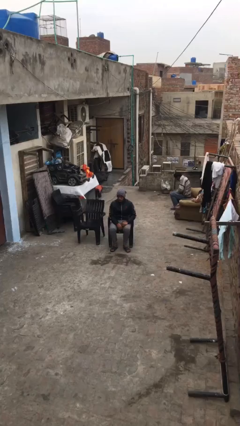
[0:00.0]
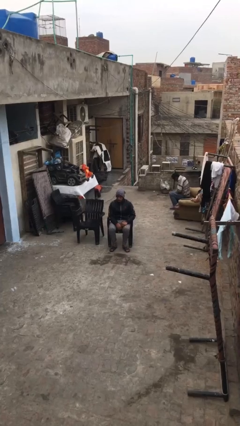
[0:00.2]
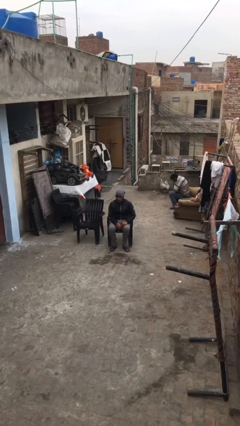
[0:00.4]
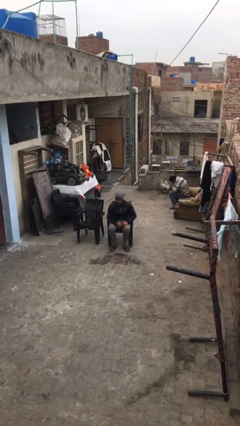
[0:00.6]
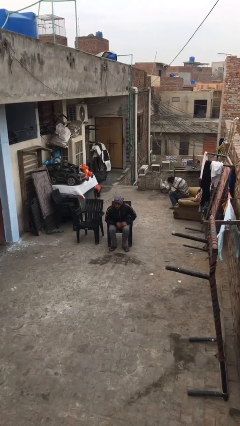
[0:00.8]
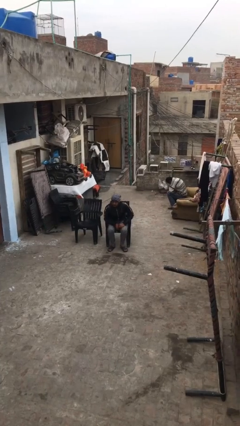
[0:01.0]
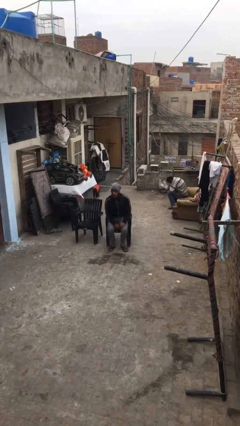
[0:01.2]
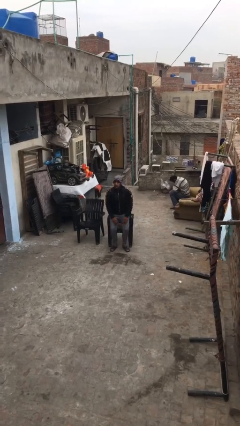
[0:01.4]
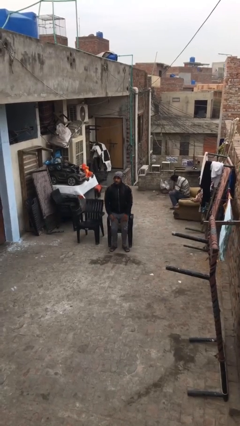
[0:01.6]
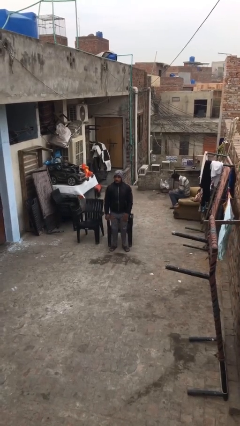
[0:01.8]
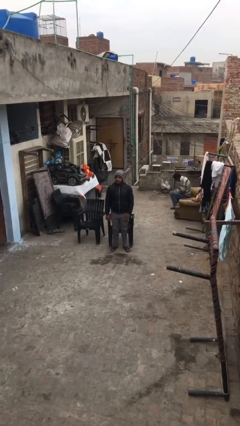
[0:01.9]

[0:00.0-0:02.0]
person stands up

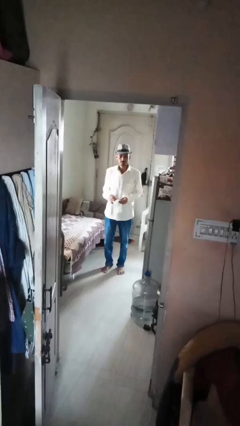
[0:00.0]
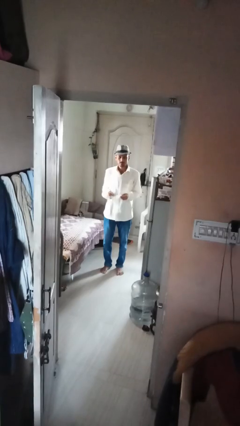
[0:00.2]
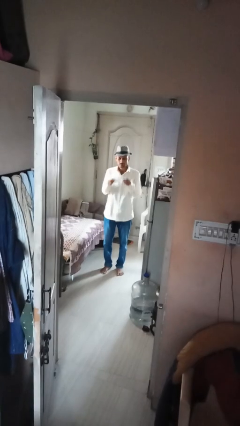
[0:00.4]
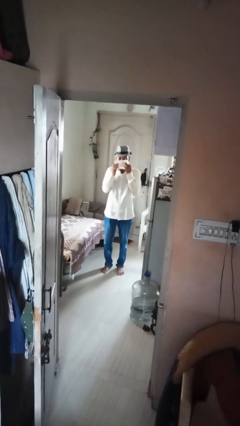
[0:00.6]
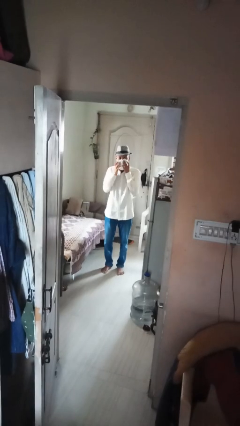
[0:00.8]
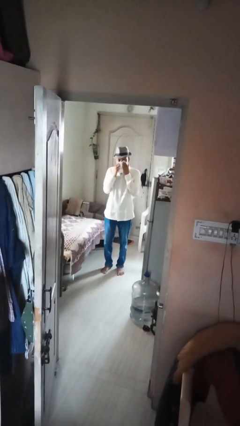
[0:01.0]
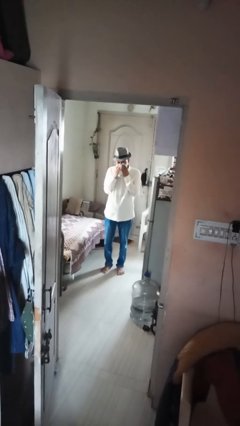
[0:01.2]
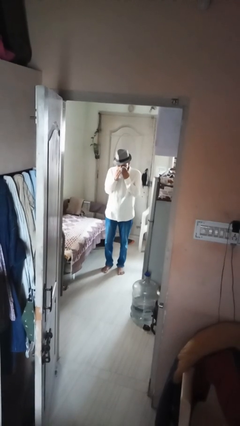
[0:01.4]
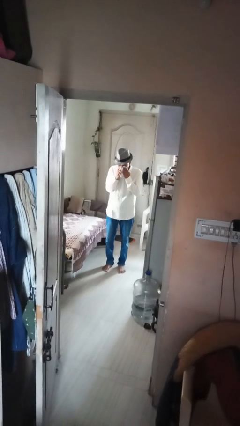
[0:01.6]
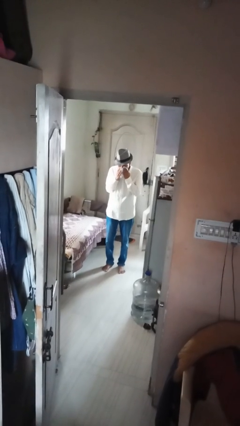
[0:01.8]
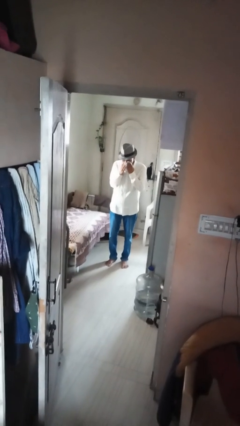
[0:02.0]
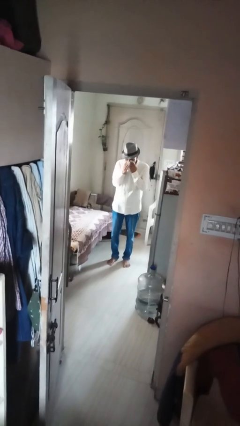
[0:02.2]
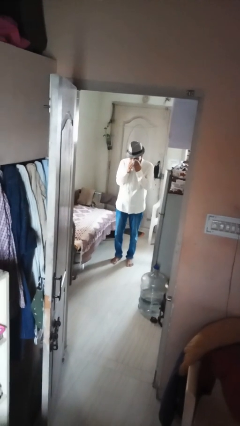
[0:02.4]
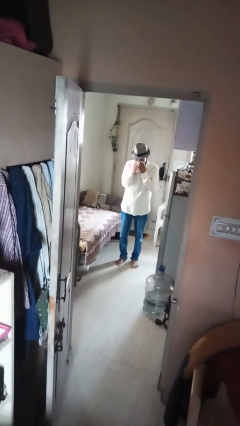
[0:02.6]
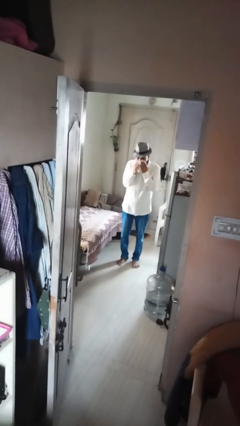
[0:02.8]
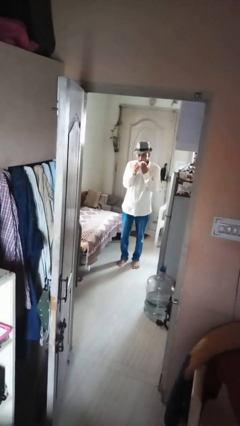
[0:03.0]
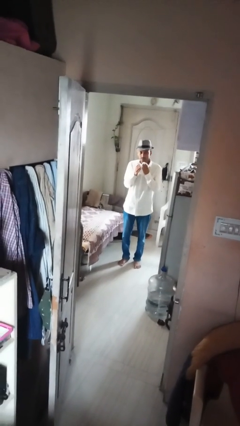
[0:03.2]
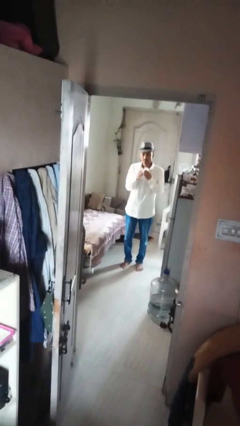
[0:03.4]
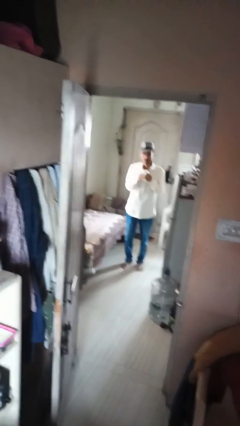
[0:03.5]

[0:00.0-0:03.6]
person blows nose

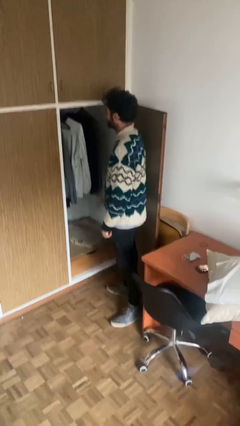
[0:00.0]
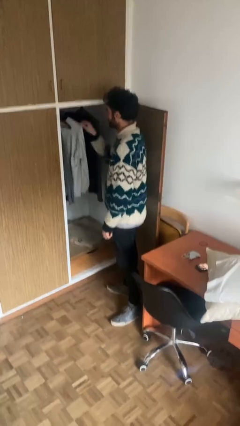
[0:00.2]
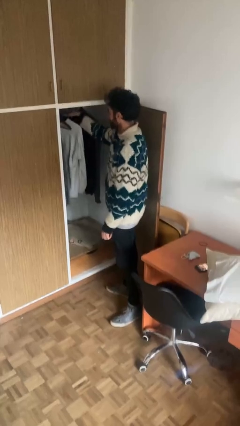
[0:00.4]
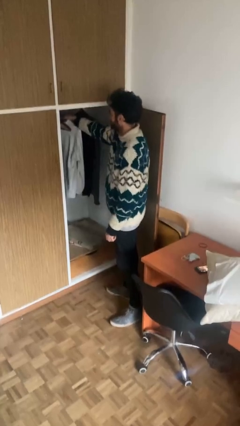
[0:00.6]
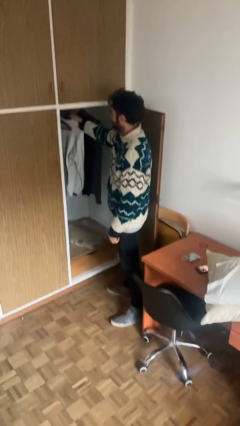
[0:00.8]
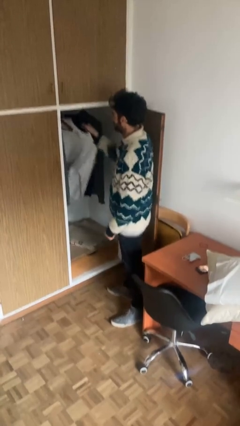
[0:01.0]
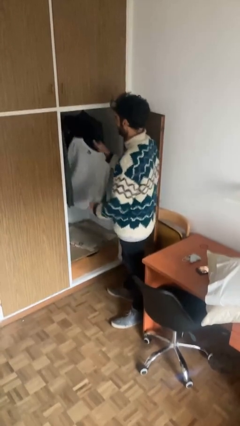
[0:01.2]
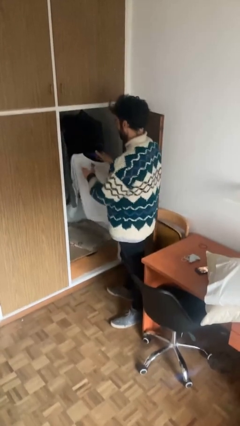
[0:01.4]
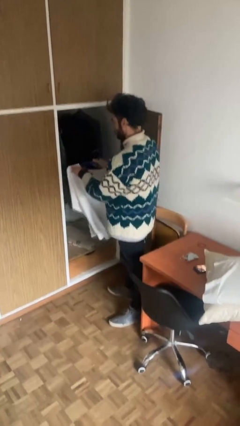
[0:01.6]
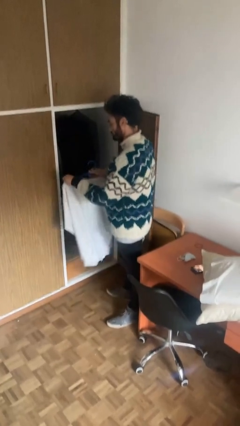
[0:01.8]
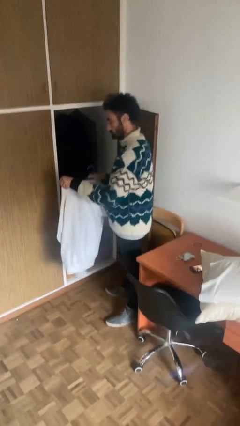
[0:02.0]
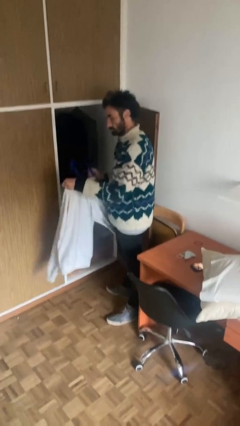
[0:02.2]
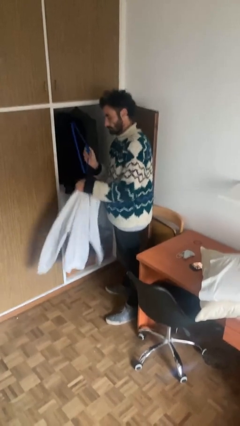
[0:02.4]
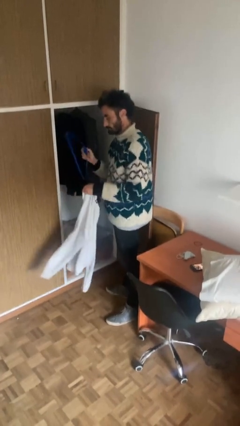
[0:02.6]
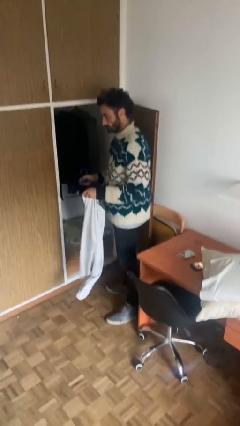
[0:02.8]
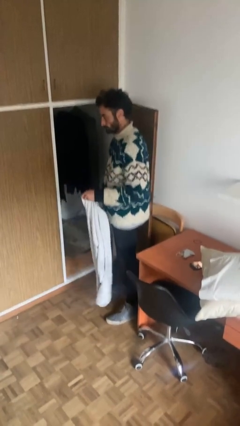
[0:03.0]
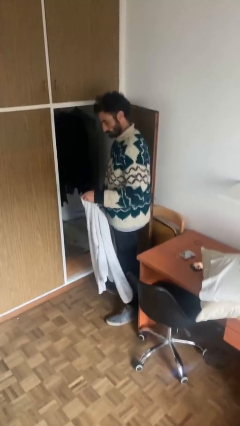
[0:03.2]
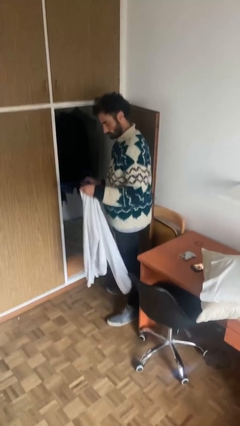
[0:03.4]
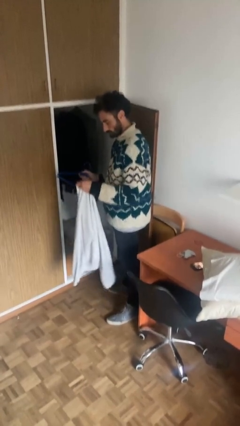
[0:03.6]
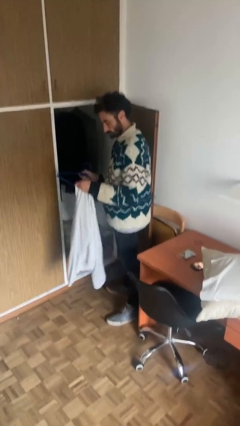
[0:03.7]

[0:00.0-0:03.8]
person takes clothes from closet

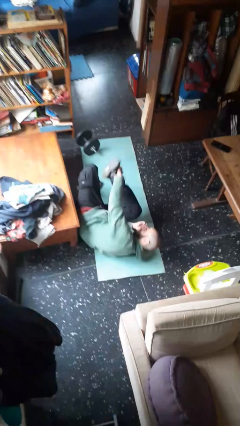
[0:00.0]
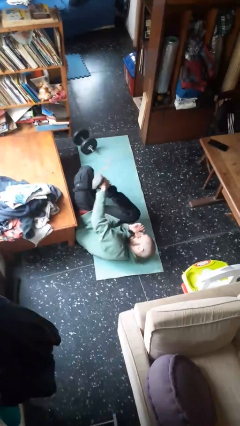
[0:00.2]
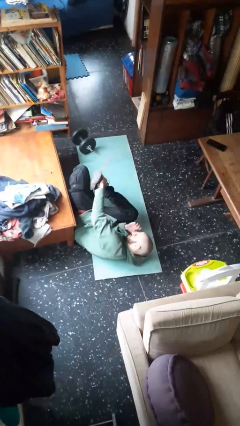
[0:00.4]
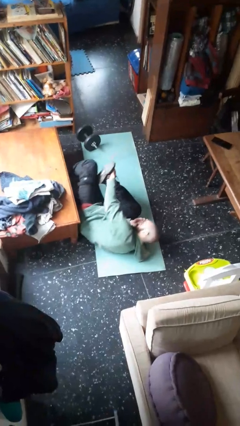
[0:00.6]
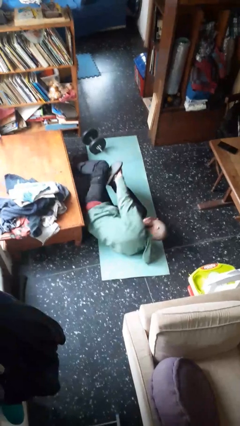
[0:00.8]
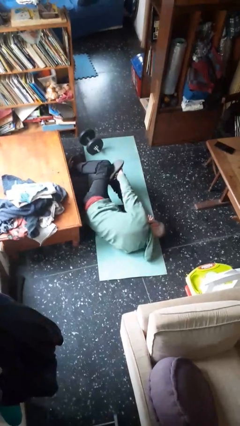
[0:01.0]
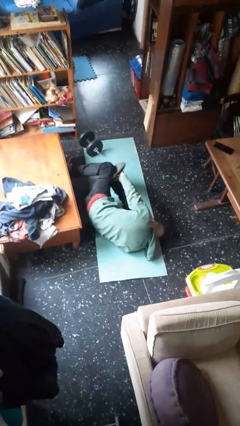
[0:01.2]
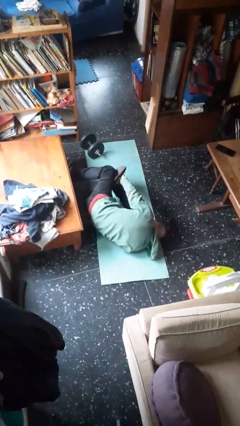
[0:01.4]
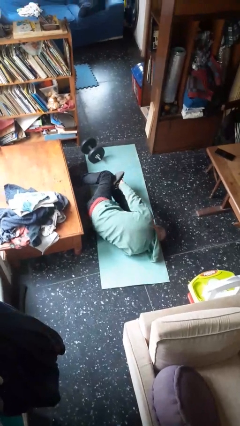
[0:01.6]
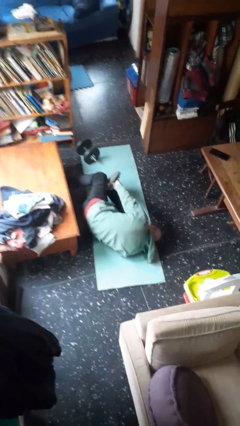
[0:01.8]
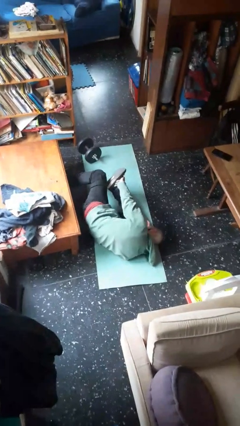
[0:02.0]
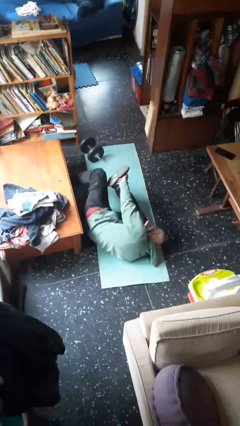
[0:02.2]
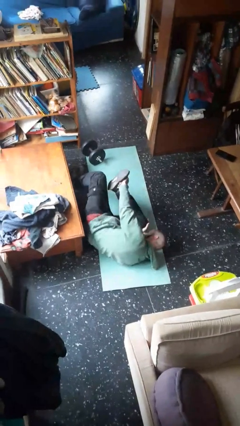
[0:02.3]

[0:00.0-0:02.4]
person lies down on floor

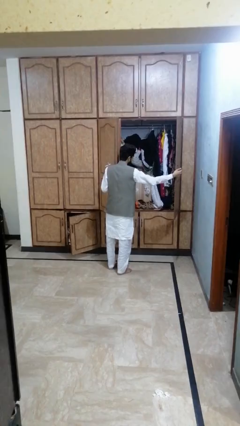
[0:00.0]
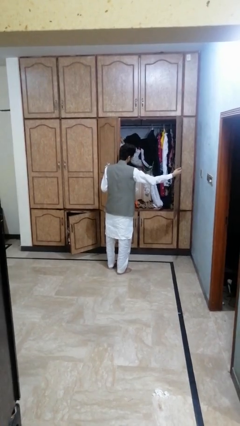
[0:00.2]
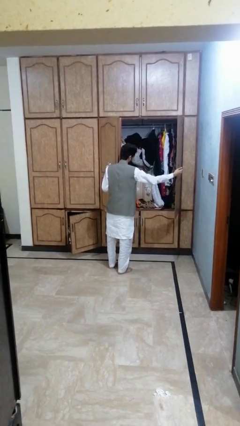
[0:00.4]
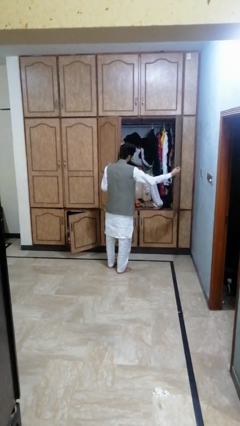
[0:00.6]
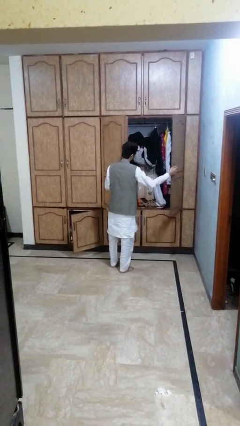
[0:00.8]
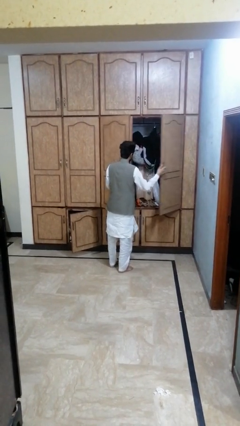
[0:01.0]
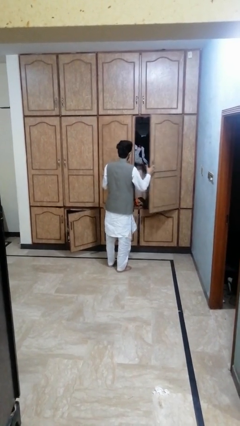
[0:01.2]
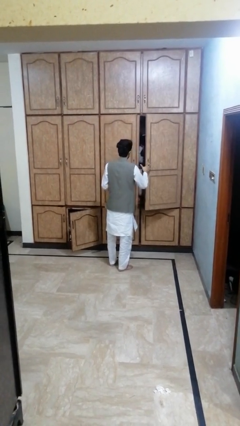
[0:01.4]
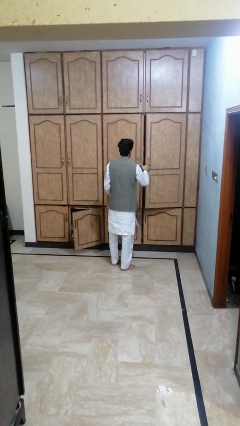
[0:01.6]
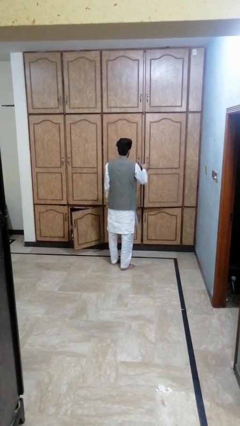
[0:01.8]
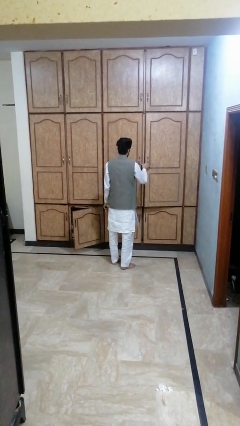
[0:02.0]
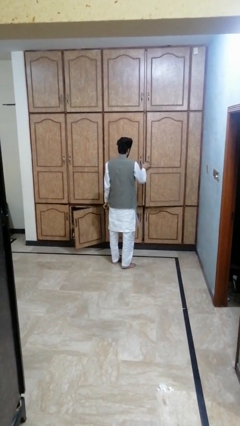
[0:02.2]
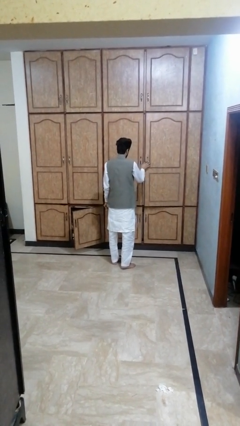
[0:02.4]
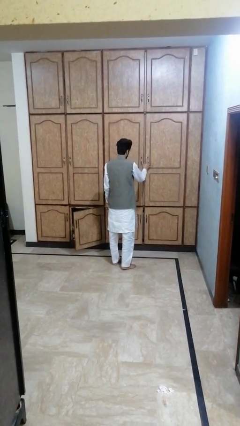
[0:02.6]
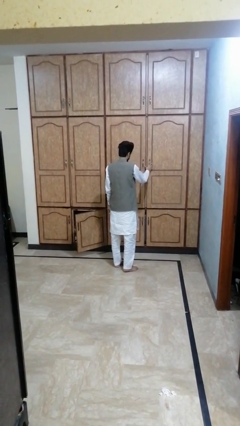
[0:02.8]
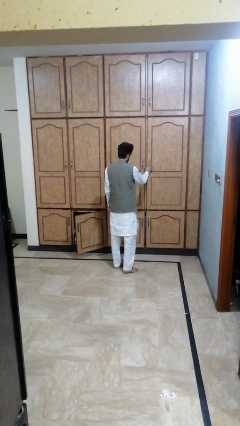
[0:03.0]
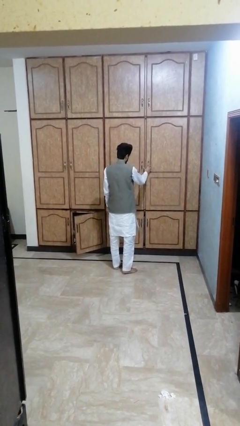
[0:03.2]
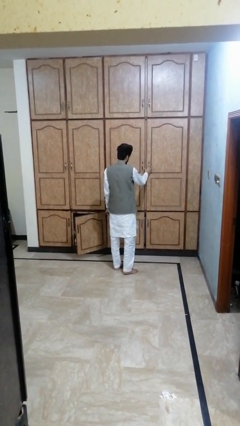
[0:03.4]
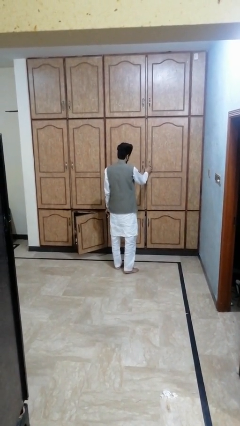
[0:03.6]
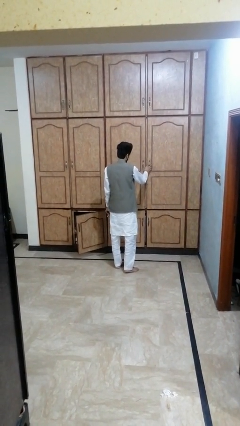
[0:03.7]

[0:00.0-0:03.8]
person closes dresser drawer

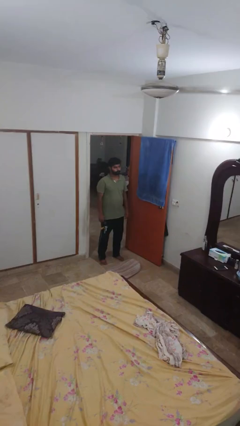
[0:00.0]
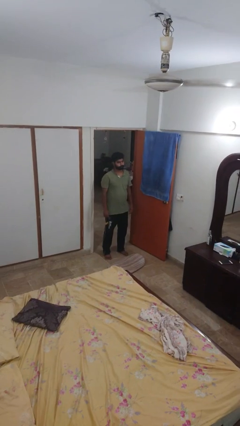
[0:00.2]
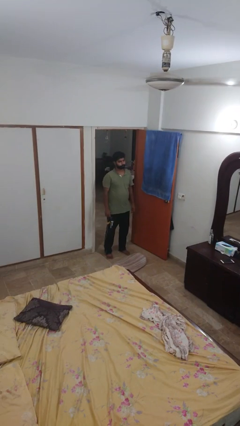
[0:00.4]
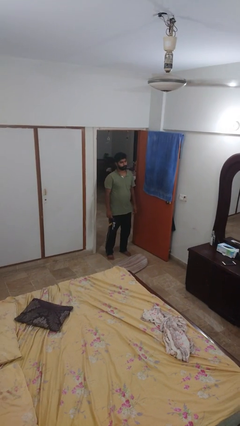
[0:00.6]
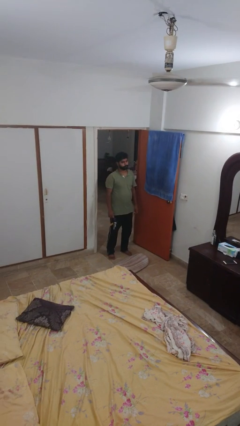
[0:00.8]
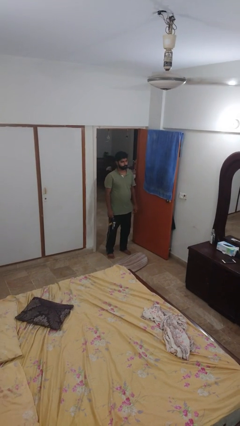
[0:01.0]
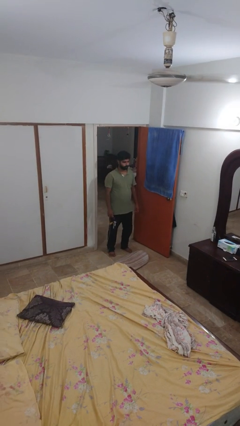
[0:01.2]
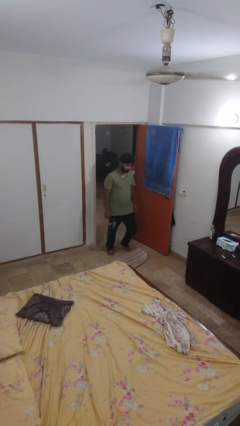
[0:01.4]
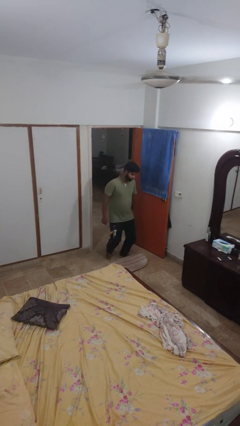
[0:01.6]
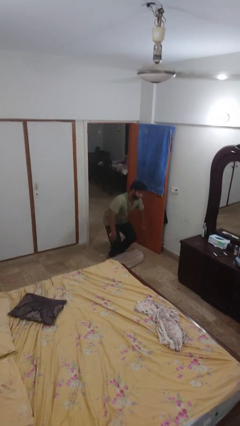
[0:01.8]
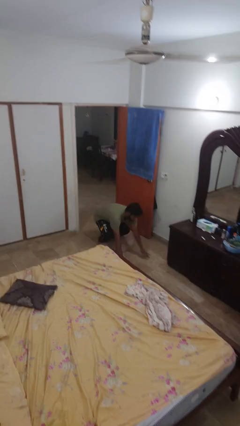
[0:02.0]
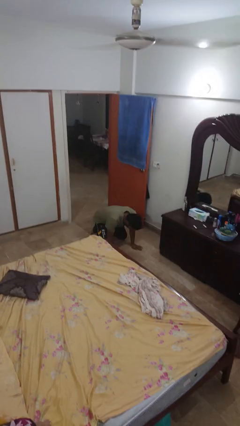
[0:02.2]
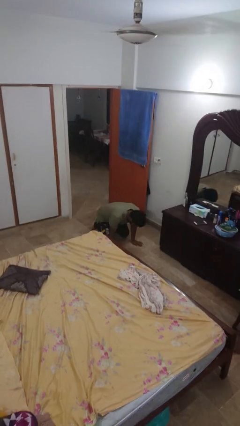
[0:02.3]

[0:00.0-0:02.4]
person trips on object on floor
